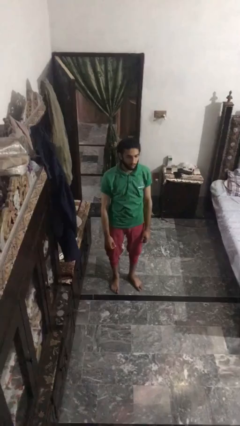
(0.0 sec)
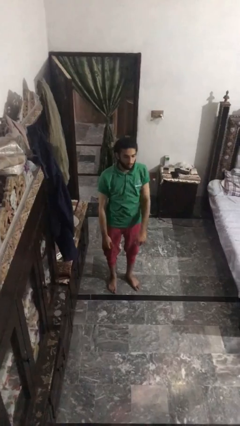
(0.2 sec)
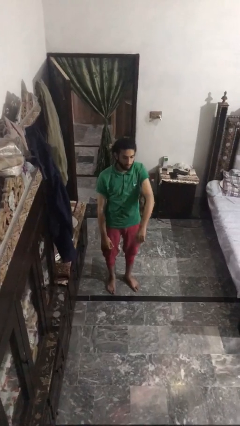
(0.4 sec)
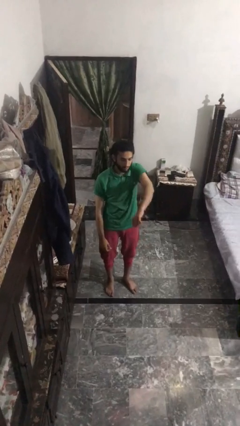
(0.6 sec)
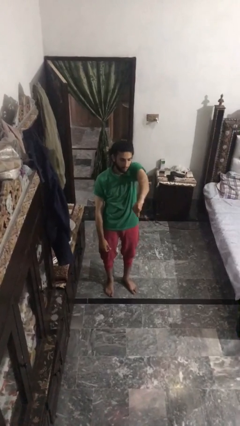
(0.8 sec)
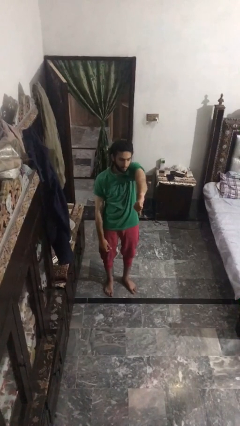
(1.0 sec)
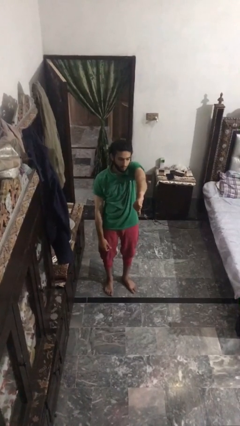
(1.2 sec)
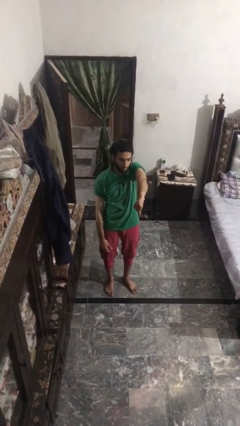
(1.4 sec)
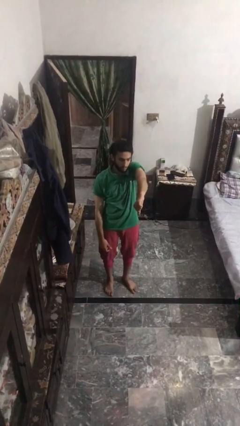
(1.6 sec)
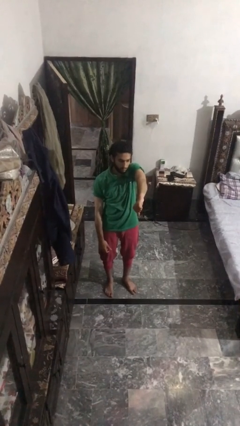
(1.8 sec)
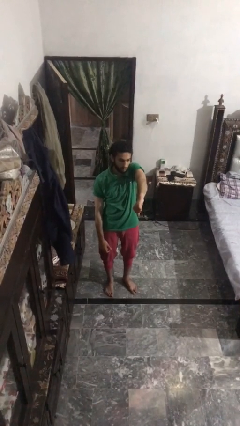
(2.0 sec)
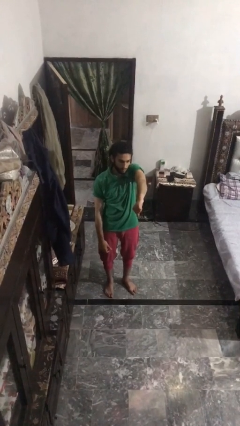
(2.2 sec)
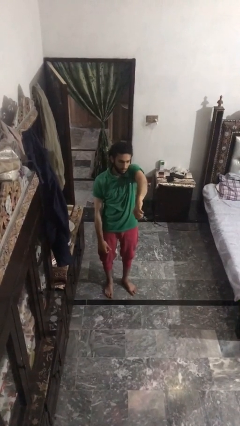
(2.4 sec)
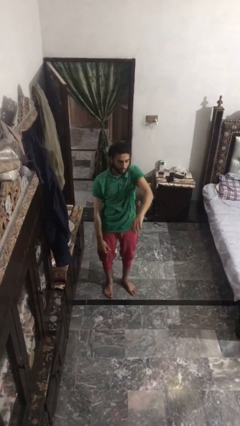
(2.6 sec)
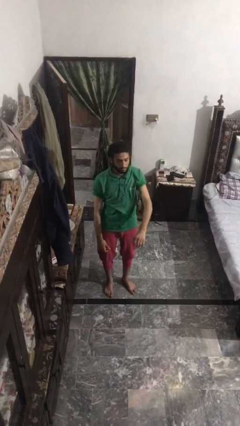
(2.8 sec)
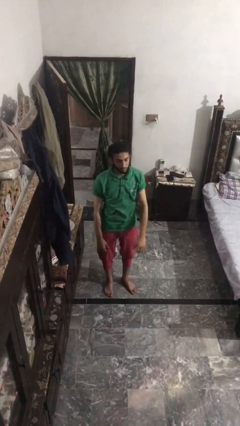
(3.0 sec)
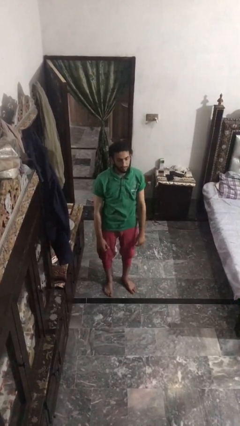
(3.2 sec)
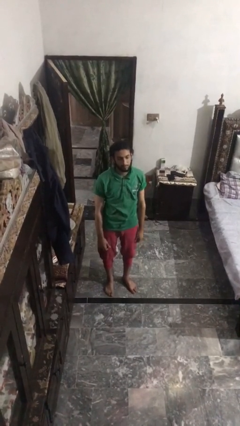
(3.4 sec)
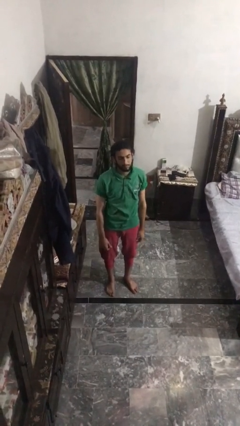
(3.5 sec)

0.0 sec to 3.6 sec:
person gestures thumbs down

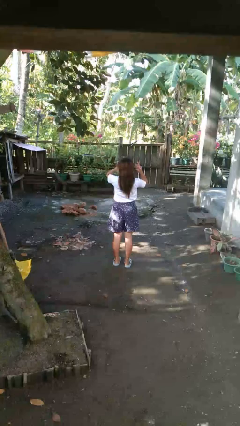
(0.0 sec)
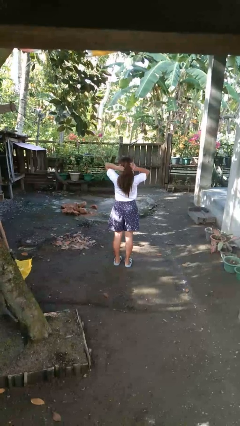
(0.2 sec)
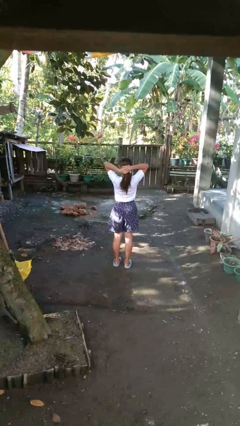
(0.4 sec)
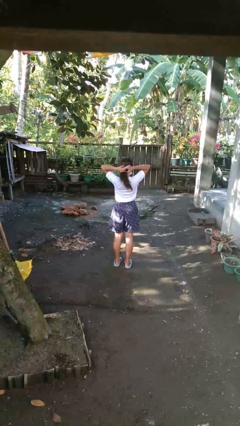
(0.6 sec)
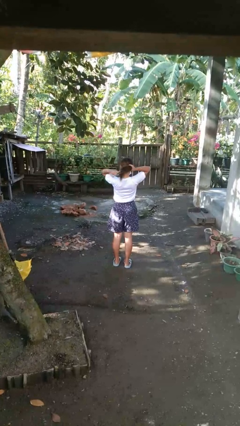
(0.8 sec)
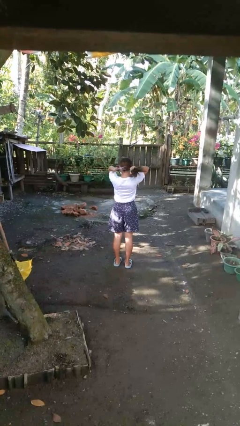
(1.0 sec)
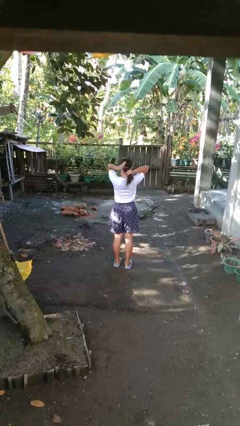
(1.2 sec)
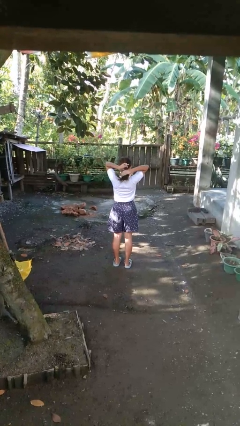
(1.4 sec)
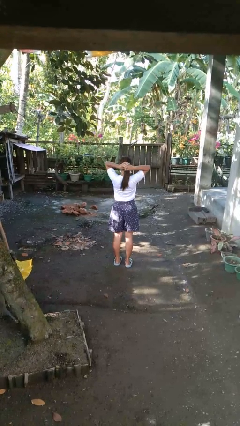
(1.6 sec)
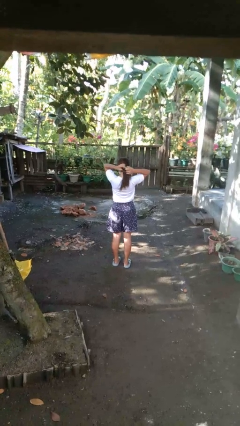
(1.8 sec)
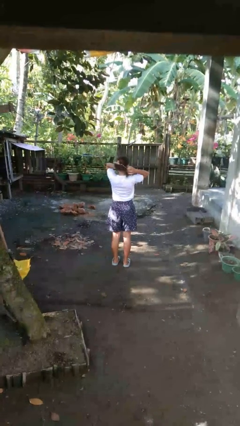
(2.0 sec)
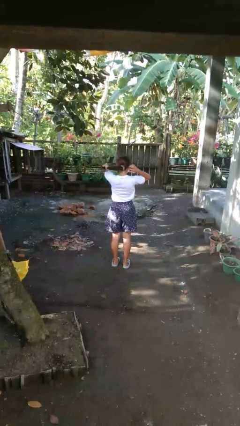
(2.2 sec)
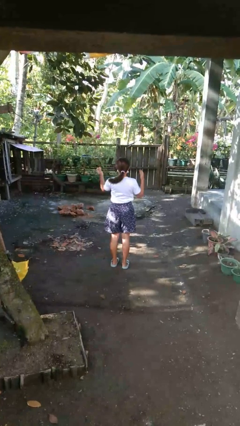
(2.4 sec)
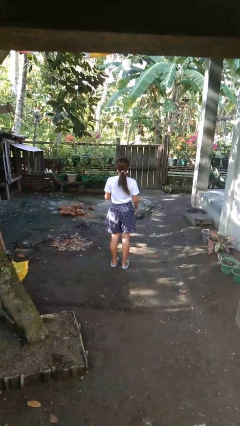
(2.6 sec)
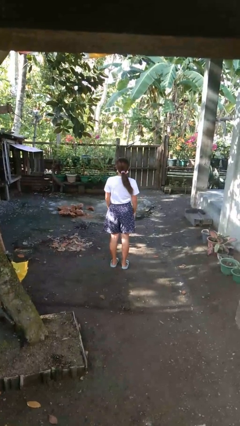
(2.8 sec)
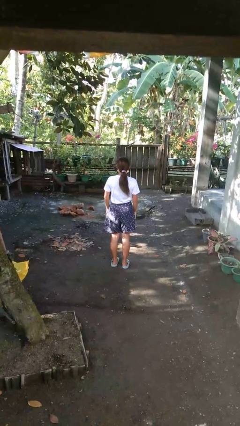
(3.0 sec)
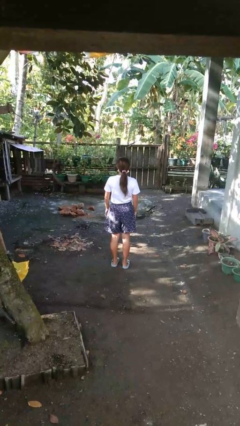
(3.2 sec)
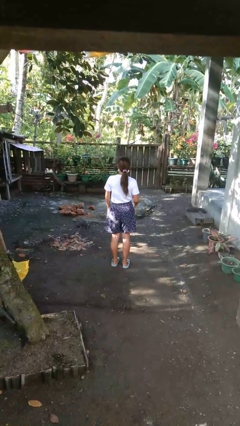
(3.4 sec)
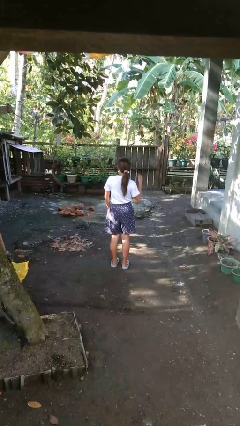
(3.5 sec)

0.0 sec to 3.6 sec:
person puts hair in ponytail

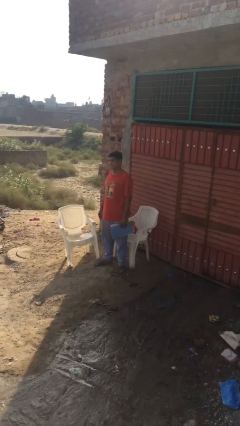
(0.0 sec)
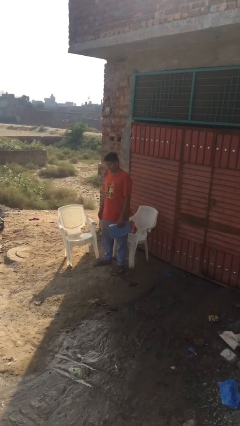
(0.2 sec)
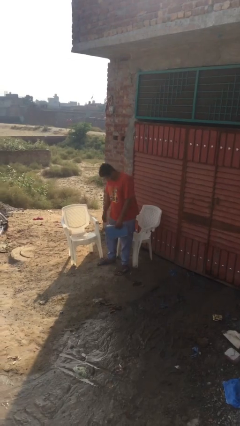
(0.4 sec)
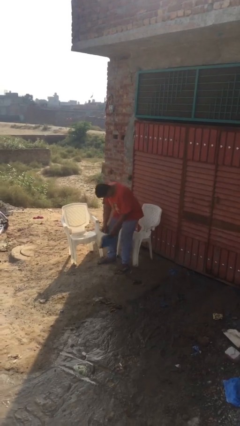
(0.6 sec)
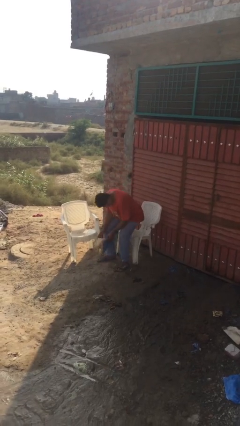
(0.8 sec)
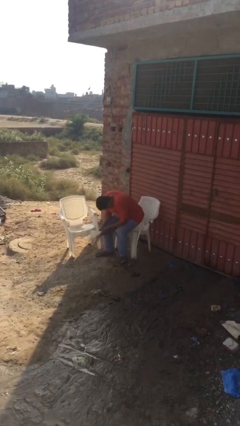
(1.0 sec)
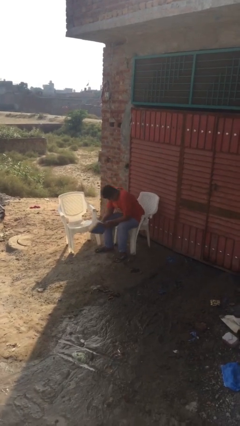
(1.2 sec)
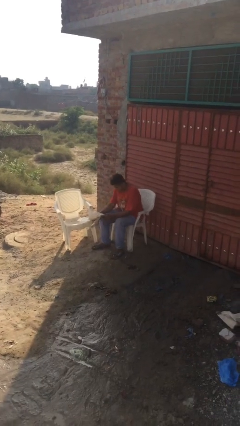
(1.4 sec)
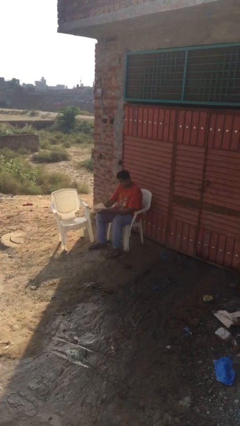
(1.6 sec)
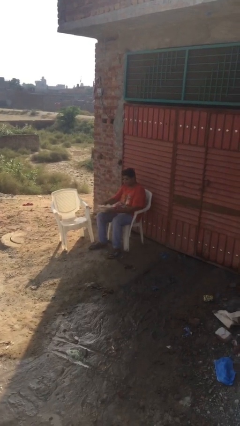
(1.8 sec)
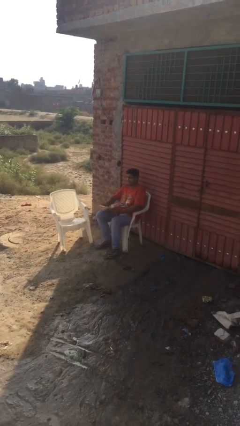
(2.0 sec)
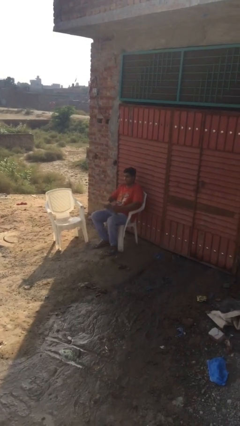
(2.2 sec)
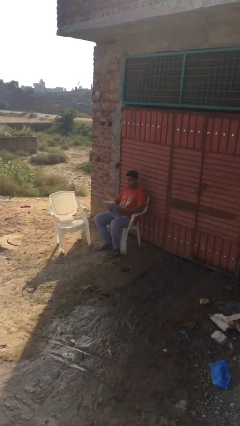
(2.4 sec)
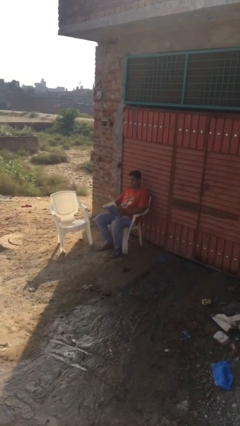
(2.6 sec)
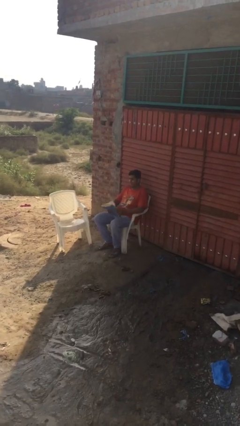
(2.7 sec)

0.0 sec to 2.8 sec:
person sits down

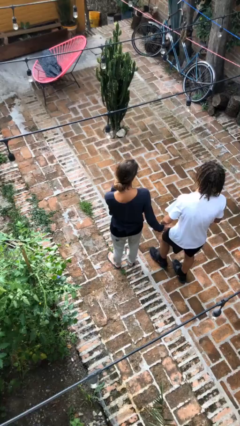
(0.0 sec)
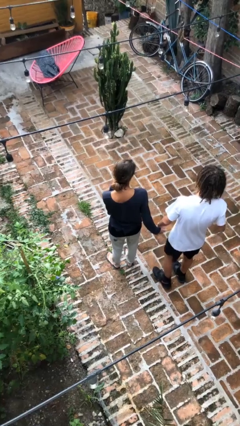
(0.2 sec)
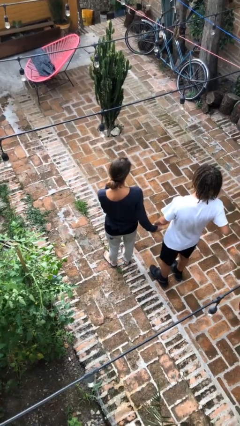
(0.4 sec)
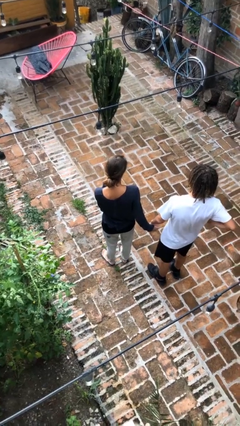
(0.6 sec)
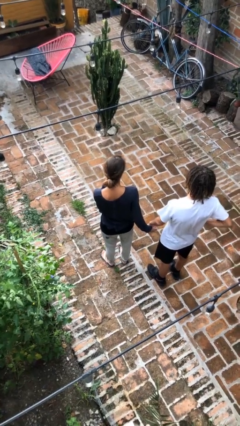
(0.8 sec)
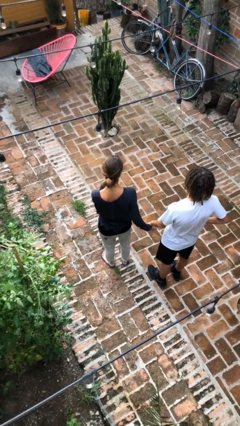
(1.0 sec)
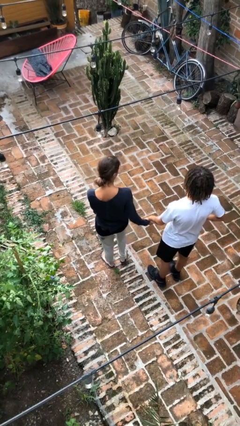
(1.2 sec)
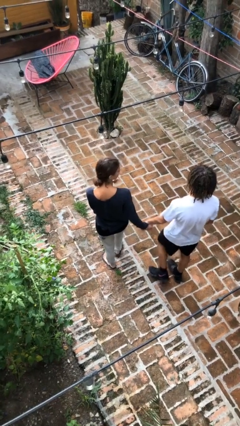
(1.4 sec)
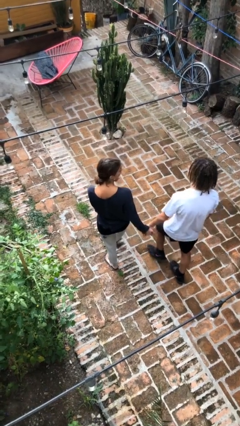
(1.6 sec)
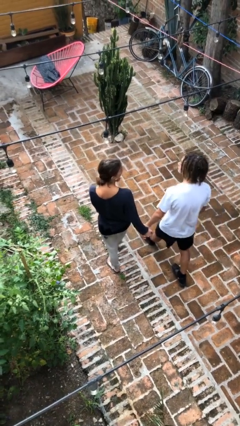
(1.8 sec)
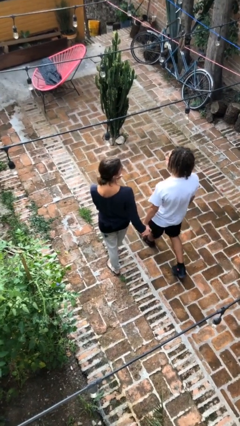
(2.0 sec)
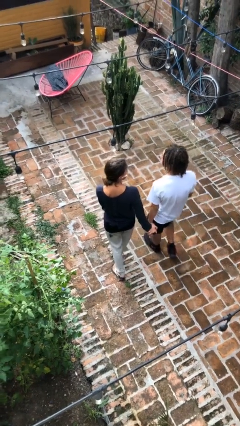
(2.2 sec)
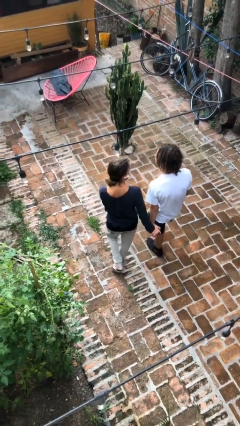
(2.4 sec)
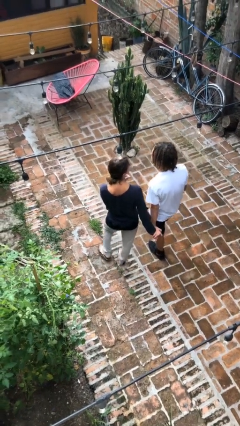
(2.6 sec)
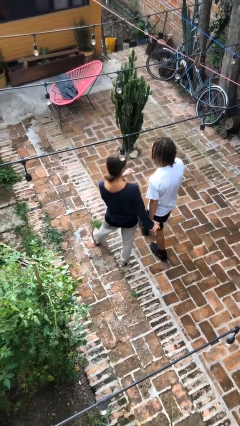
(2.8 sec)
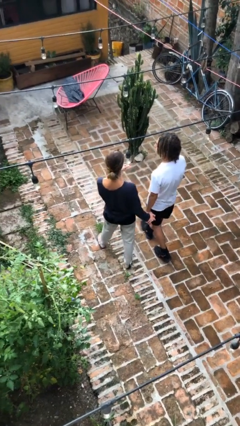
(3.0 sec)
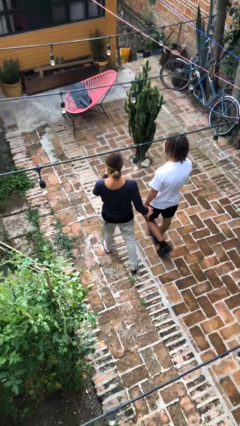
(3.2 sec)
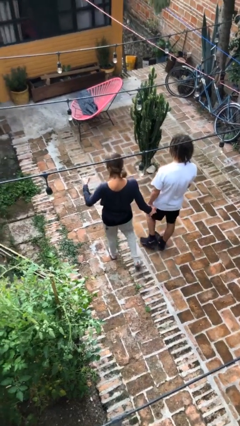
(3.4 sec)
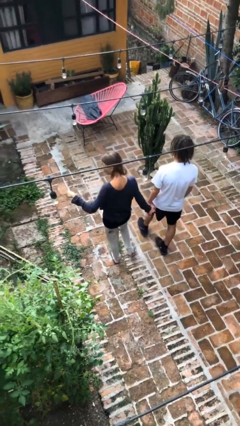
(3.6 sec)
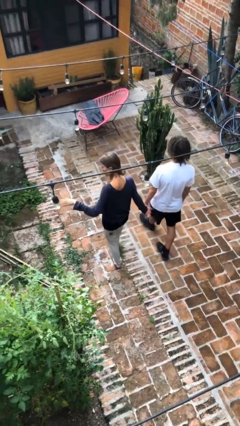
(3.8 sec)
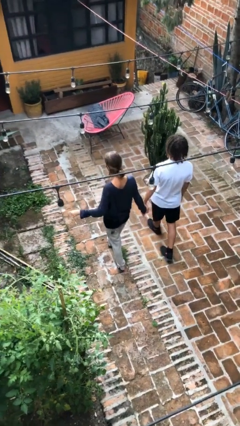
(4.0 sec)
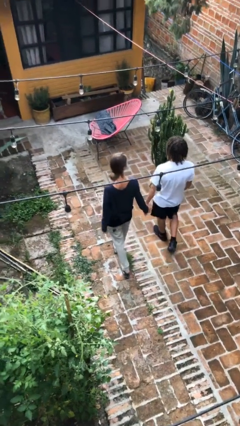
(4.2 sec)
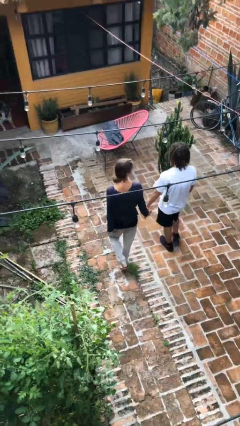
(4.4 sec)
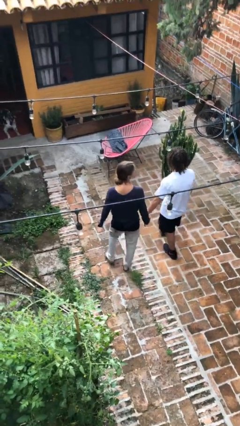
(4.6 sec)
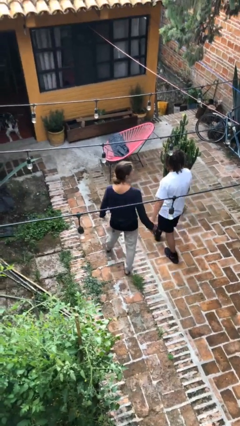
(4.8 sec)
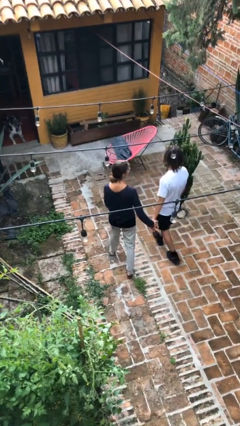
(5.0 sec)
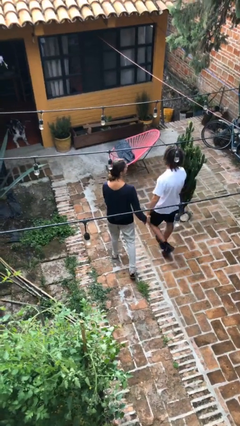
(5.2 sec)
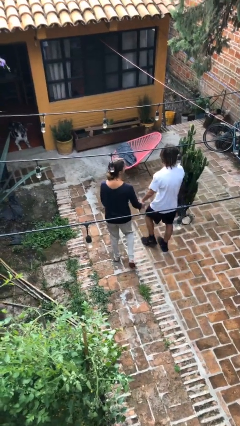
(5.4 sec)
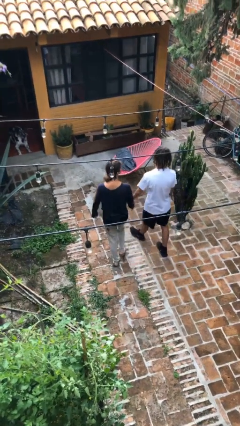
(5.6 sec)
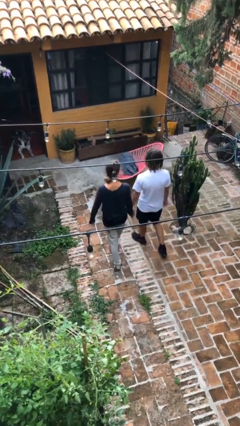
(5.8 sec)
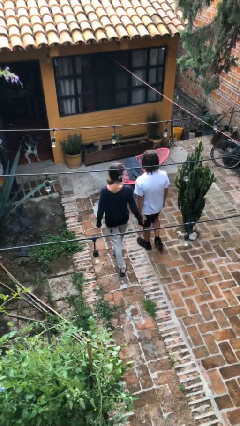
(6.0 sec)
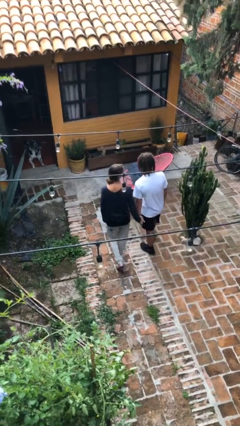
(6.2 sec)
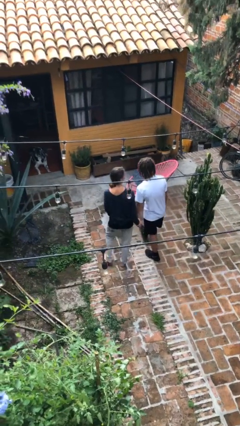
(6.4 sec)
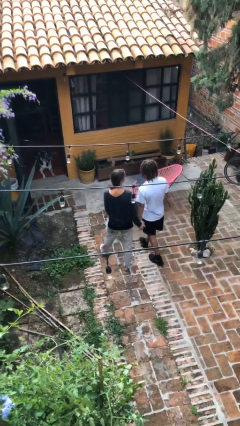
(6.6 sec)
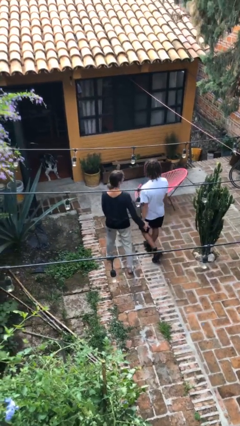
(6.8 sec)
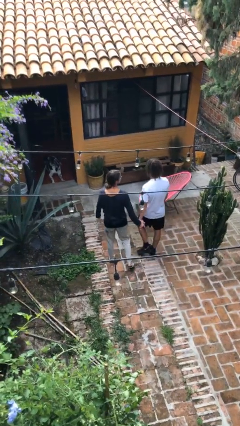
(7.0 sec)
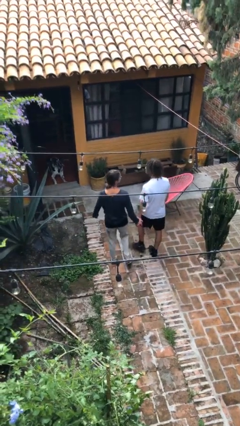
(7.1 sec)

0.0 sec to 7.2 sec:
person holds hand
